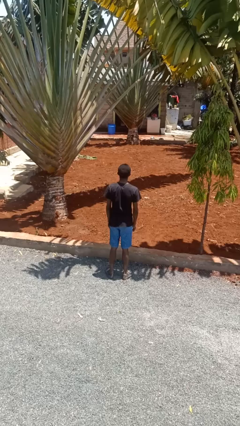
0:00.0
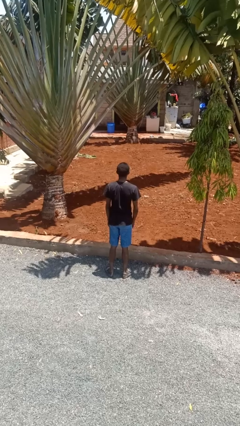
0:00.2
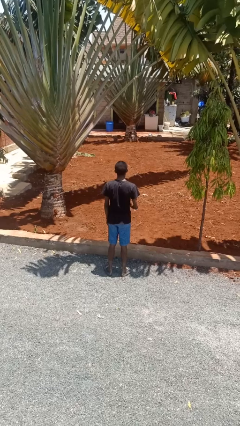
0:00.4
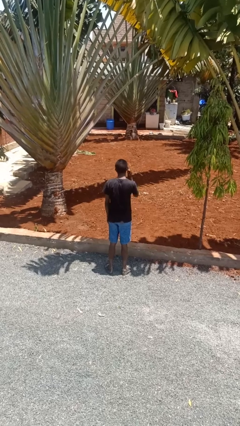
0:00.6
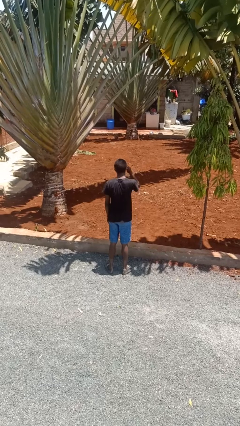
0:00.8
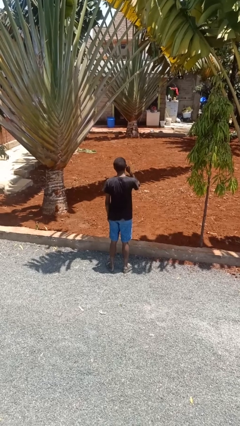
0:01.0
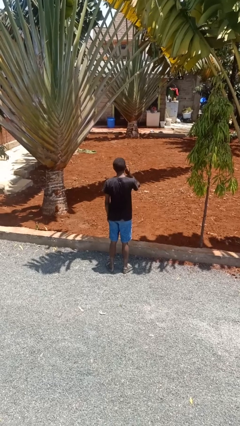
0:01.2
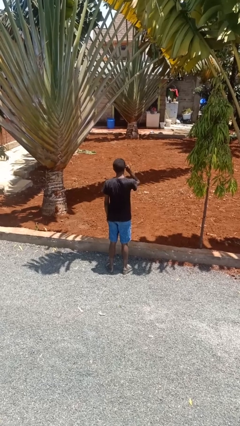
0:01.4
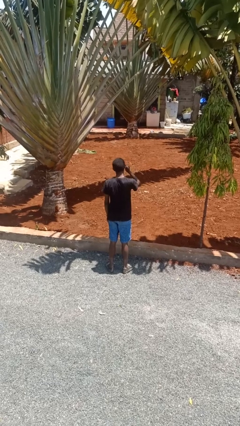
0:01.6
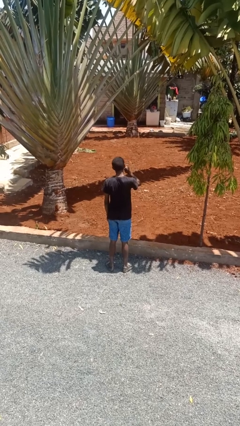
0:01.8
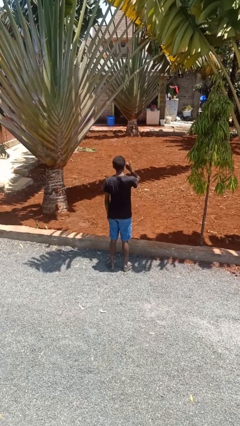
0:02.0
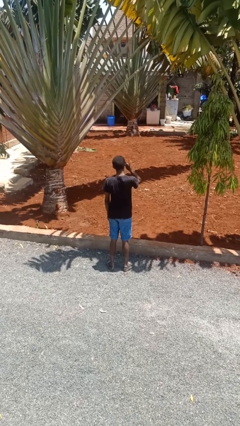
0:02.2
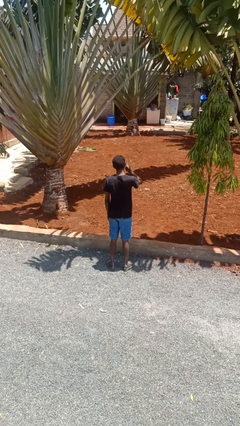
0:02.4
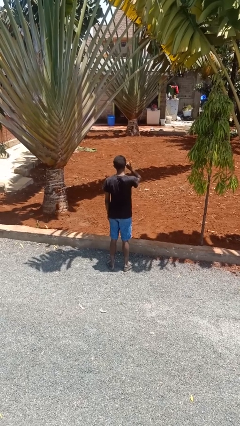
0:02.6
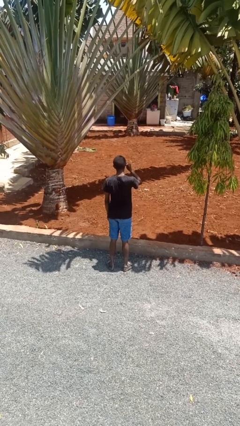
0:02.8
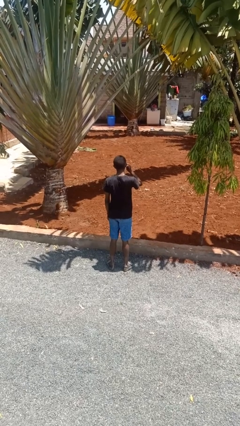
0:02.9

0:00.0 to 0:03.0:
person touches earlobe

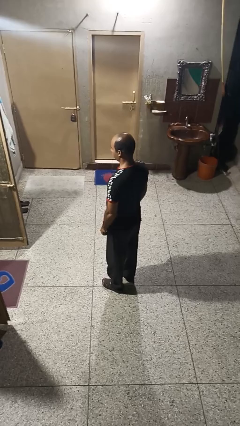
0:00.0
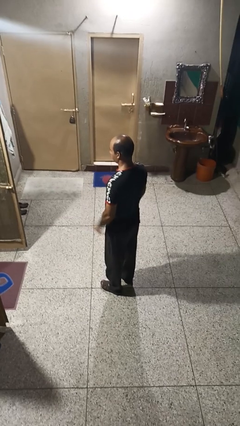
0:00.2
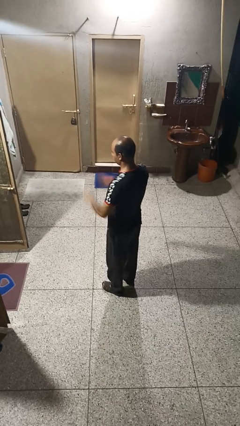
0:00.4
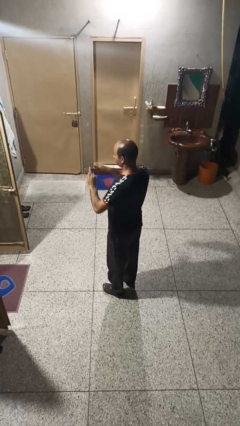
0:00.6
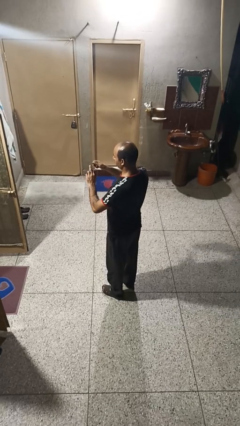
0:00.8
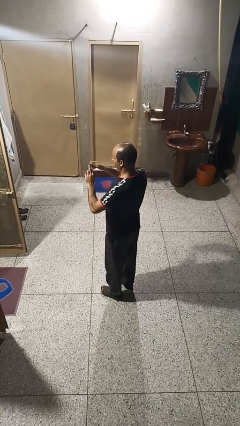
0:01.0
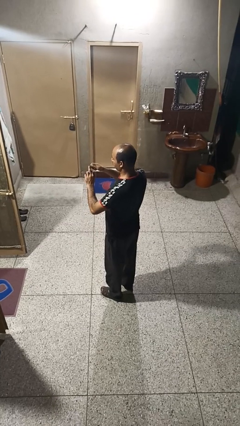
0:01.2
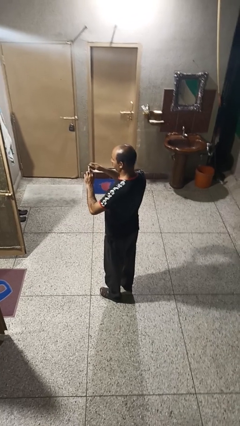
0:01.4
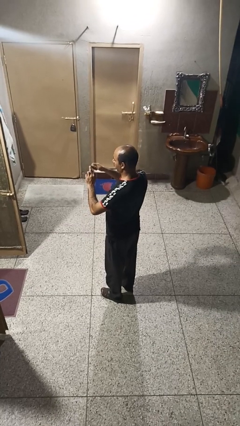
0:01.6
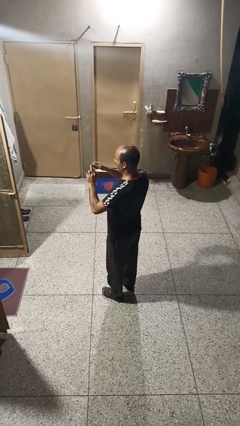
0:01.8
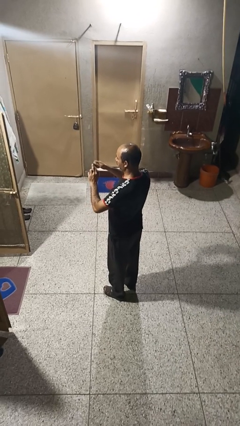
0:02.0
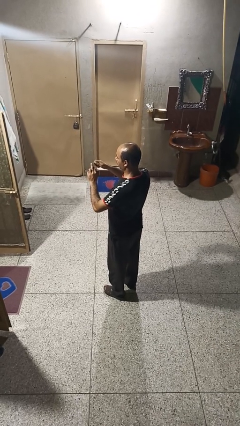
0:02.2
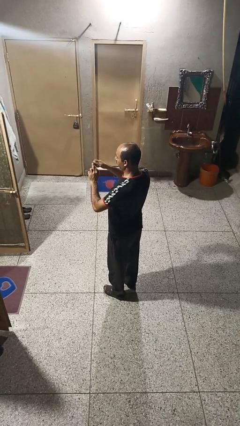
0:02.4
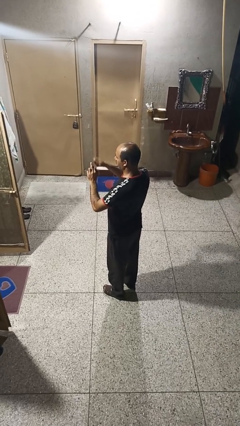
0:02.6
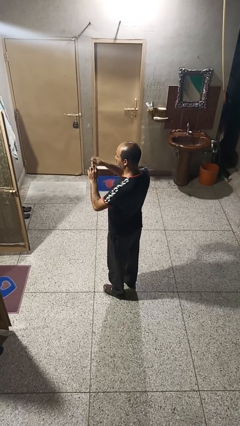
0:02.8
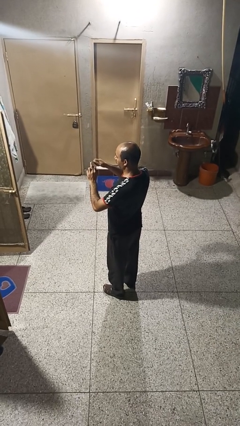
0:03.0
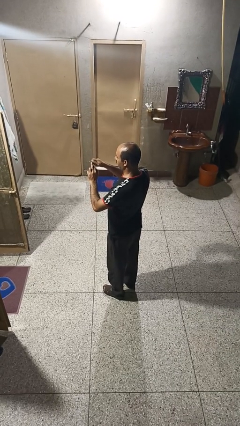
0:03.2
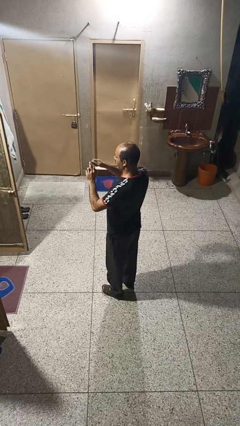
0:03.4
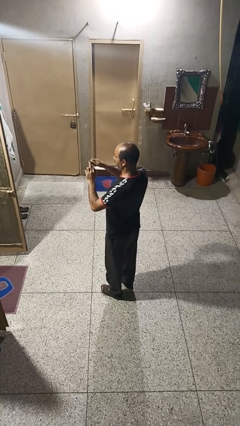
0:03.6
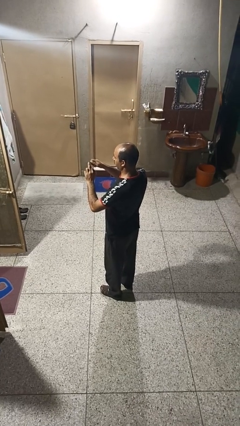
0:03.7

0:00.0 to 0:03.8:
person files fingernails

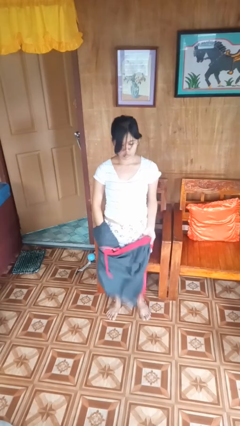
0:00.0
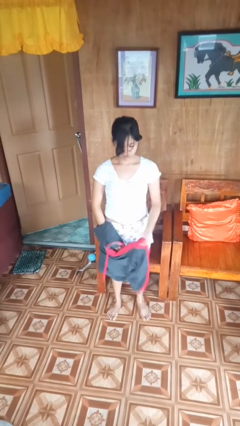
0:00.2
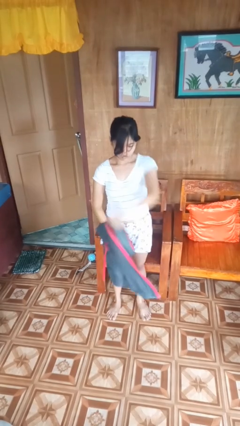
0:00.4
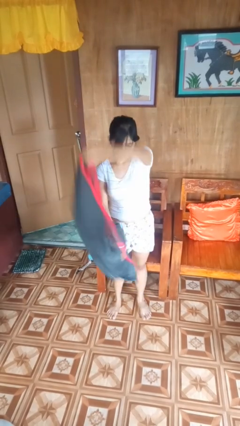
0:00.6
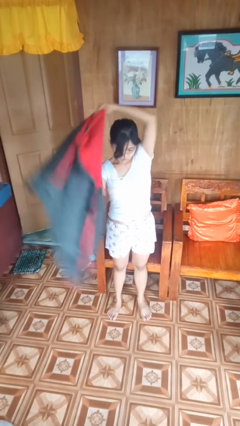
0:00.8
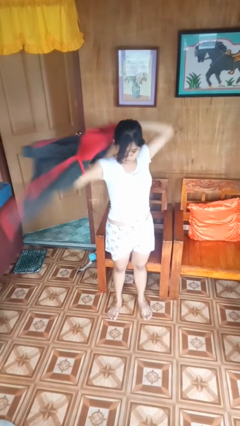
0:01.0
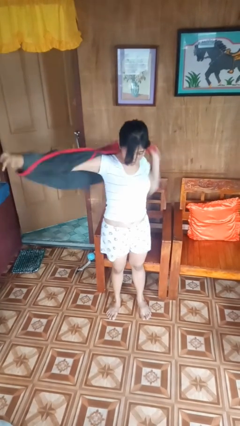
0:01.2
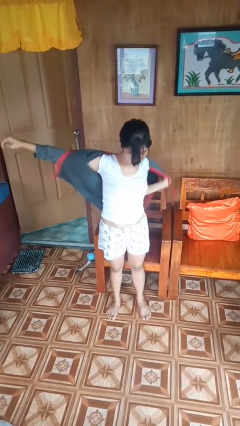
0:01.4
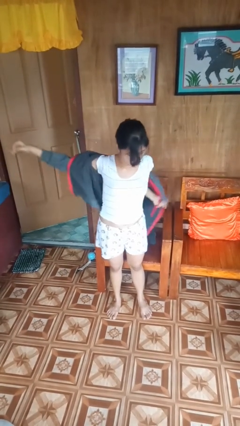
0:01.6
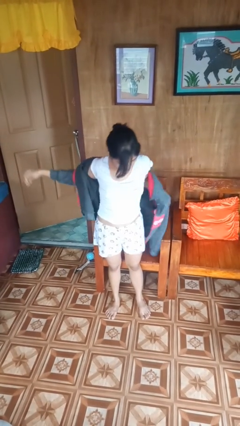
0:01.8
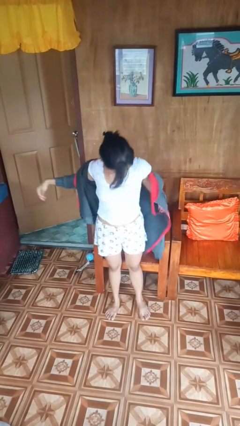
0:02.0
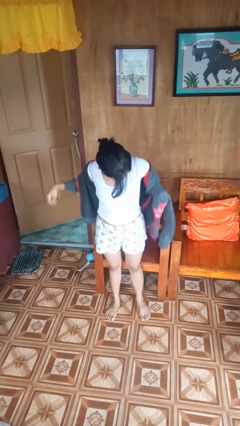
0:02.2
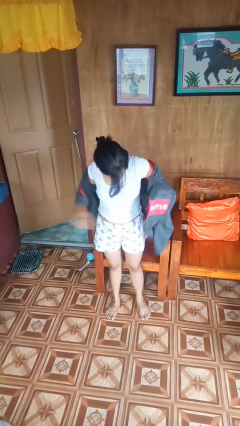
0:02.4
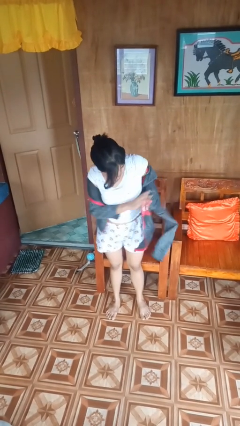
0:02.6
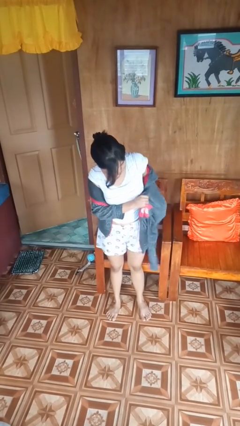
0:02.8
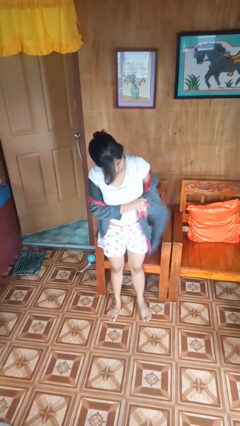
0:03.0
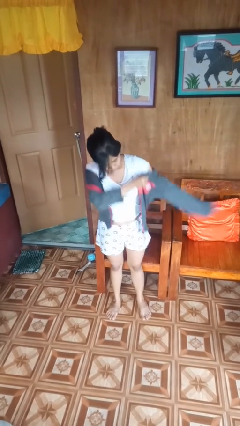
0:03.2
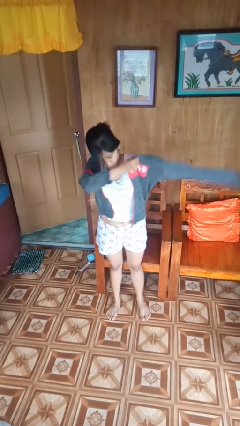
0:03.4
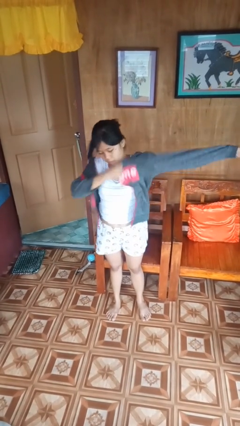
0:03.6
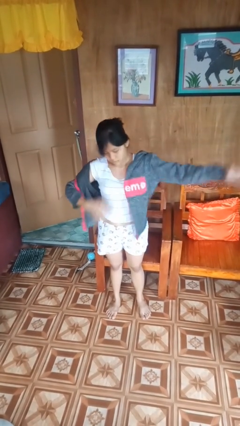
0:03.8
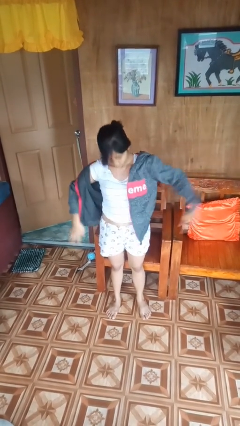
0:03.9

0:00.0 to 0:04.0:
person puts on jacket

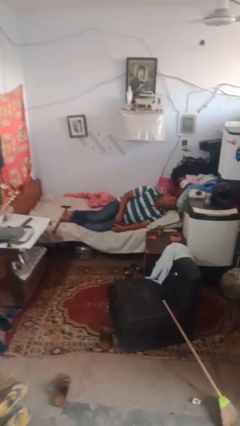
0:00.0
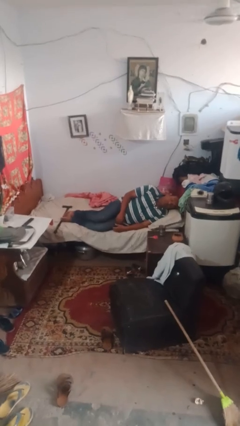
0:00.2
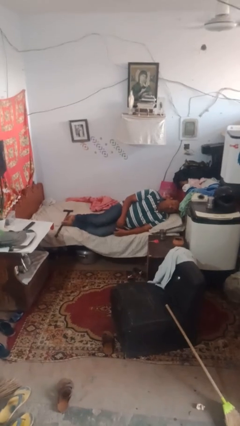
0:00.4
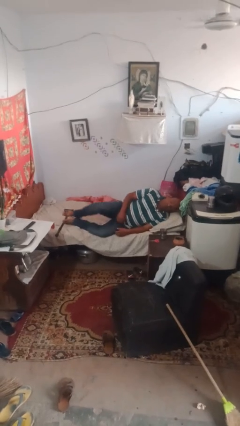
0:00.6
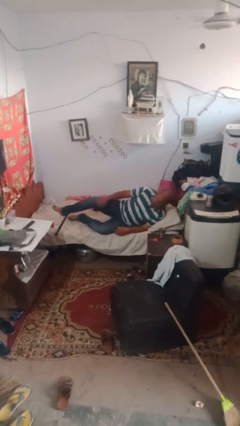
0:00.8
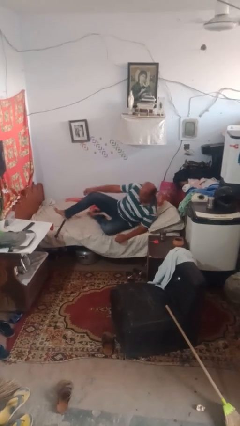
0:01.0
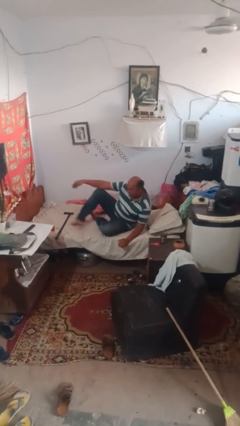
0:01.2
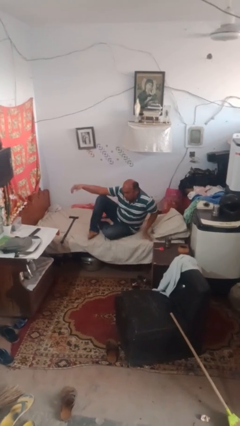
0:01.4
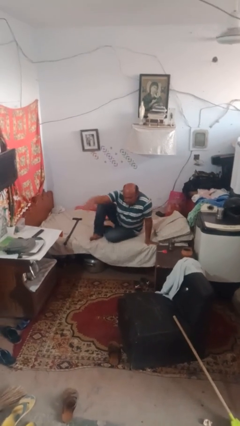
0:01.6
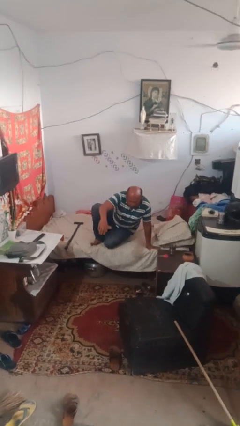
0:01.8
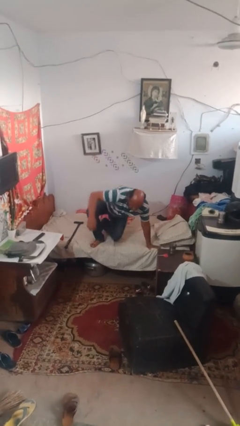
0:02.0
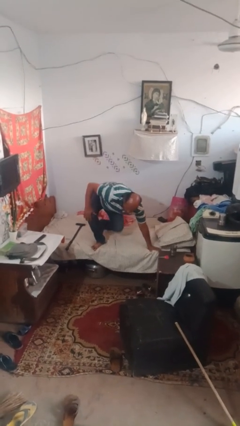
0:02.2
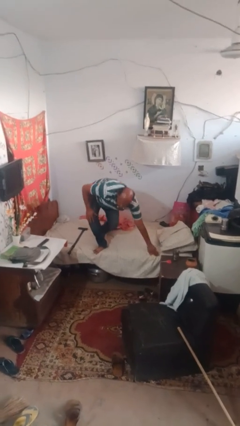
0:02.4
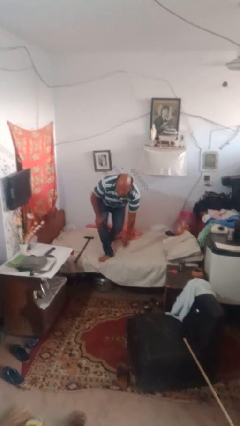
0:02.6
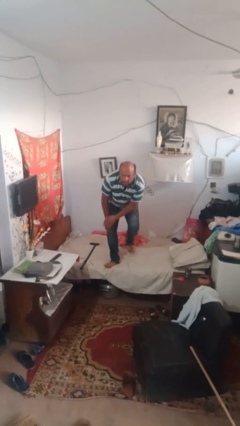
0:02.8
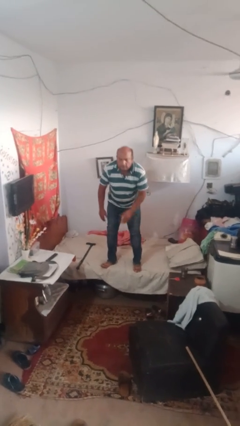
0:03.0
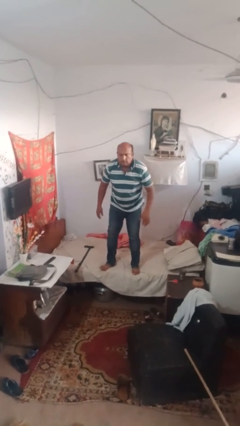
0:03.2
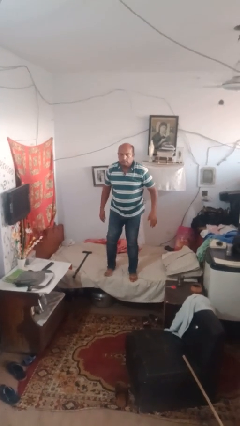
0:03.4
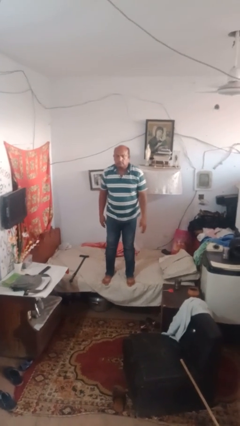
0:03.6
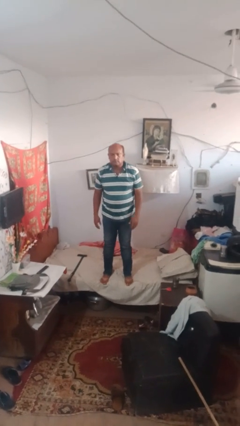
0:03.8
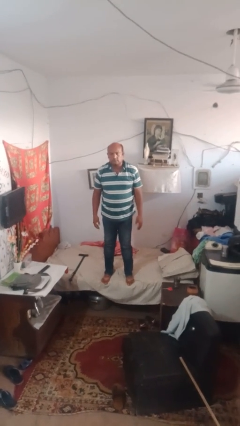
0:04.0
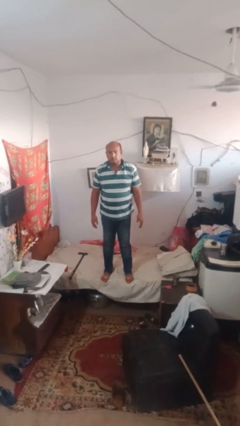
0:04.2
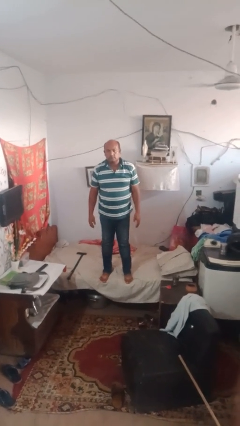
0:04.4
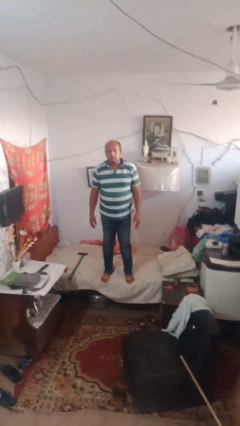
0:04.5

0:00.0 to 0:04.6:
person stands up

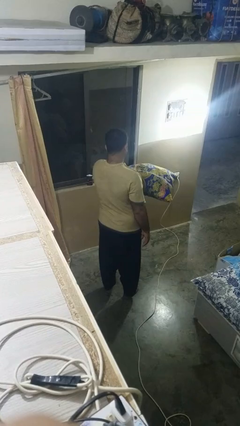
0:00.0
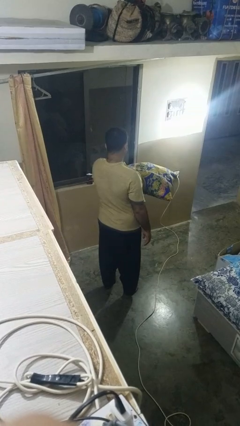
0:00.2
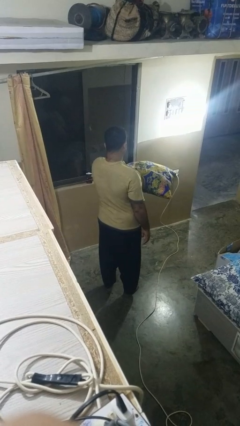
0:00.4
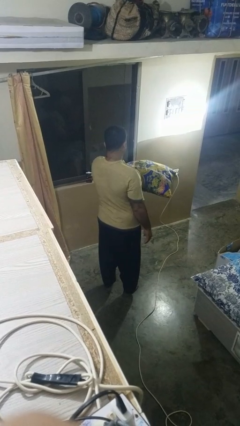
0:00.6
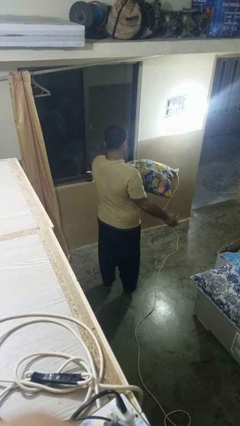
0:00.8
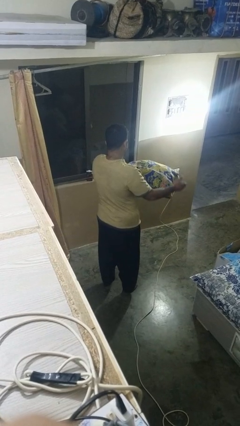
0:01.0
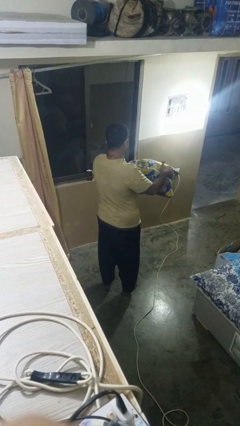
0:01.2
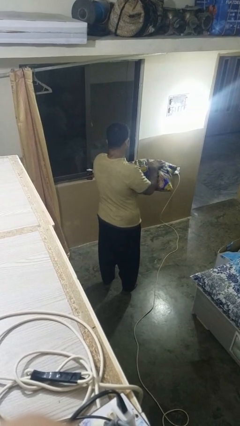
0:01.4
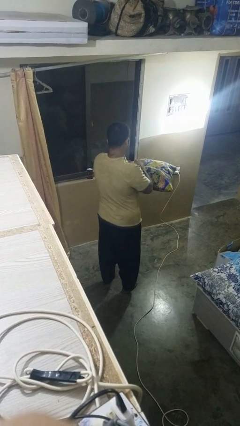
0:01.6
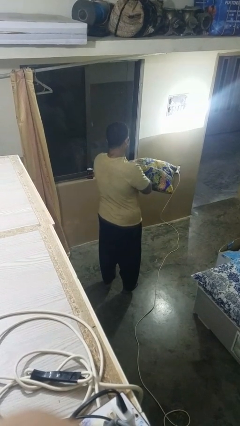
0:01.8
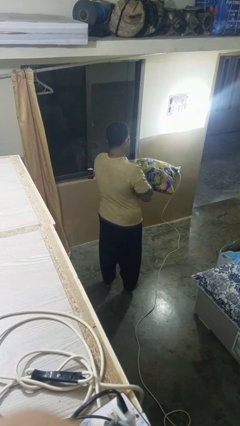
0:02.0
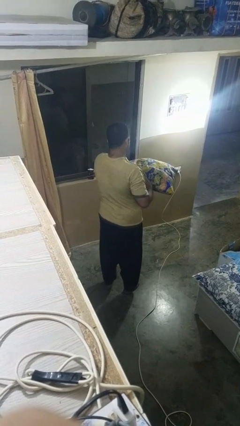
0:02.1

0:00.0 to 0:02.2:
person waves hand over object

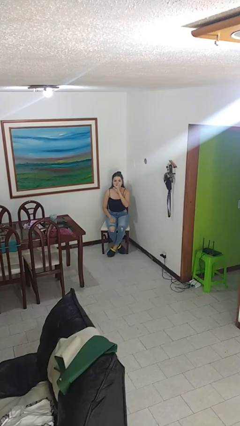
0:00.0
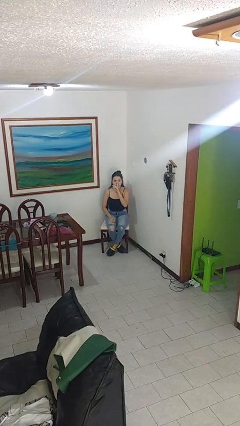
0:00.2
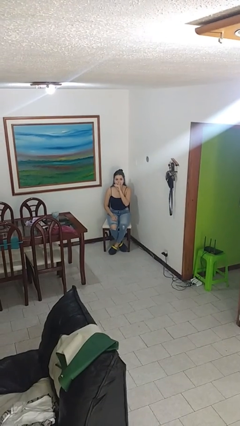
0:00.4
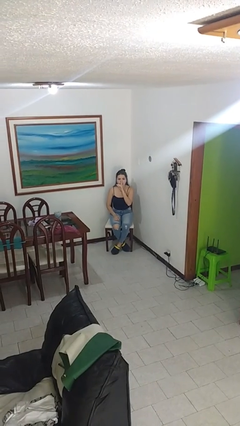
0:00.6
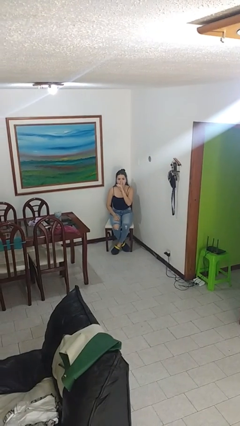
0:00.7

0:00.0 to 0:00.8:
person gestures be quiet
